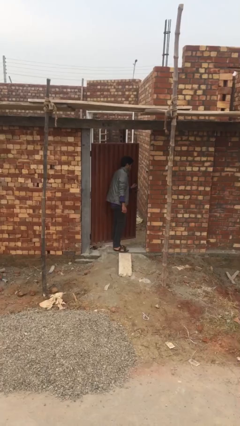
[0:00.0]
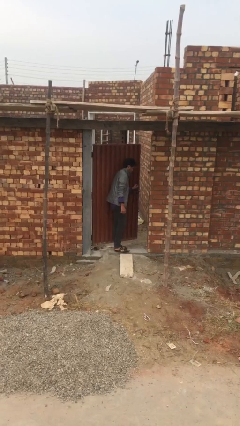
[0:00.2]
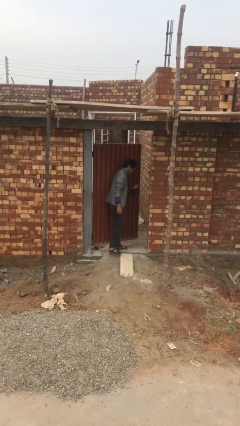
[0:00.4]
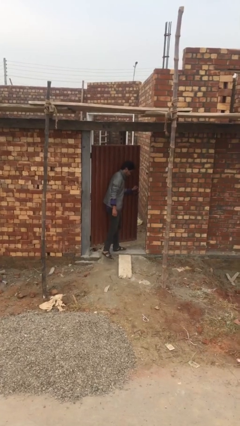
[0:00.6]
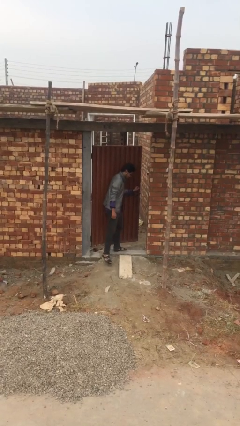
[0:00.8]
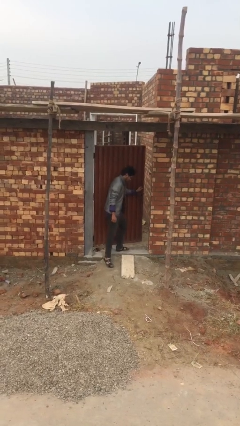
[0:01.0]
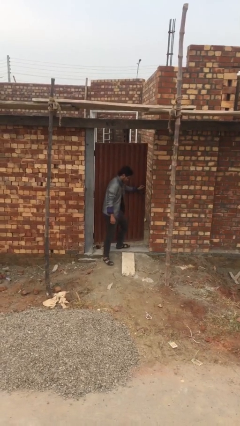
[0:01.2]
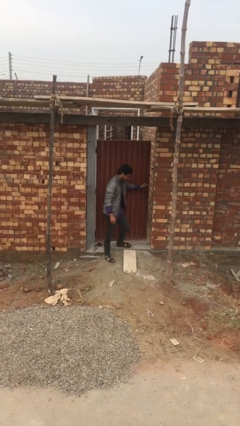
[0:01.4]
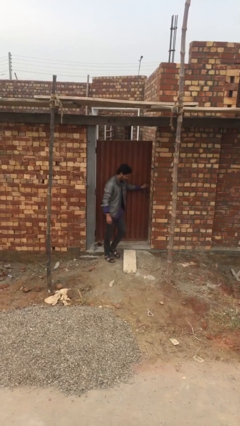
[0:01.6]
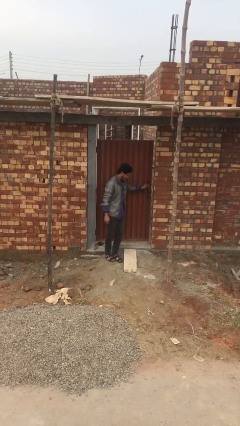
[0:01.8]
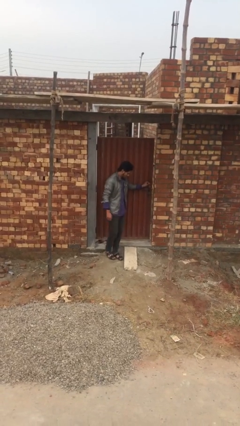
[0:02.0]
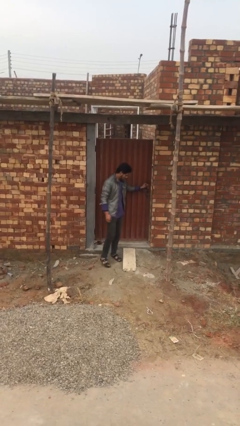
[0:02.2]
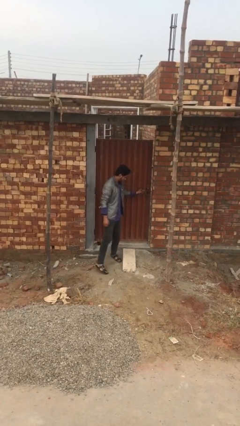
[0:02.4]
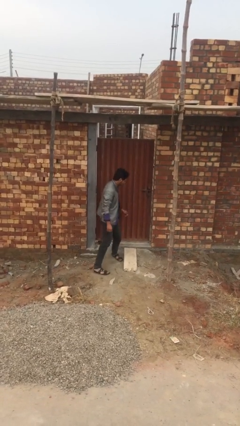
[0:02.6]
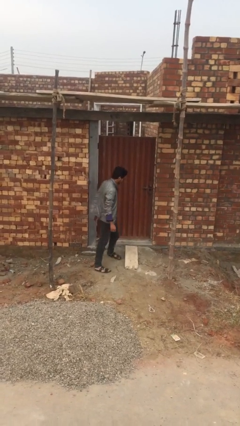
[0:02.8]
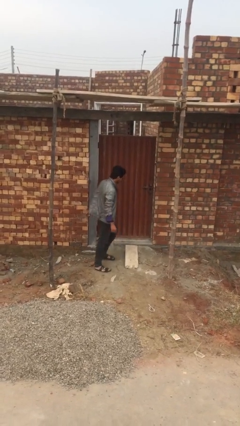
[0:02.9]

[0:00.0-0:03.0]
person closes facility door

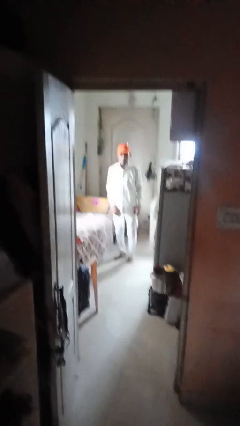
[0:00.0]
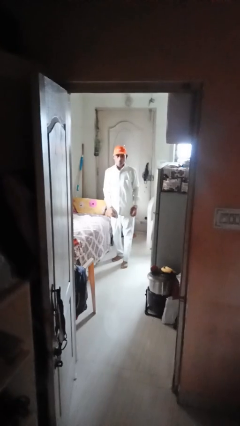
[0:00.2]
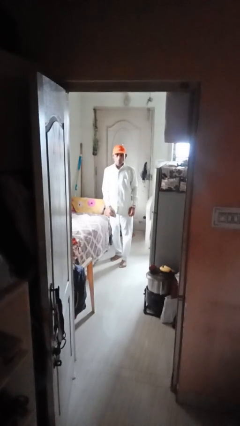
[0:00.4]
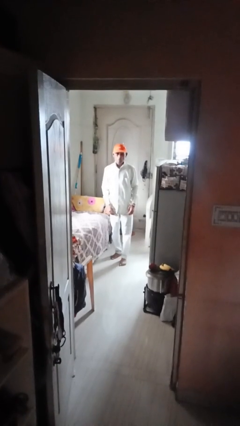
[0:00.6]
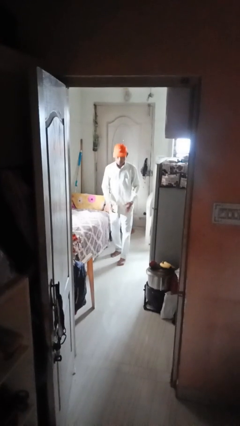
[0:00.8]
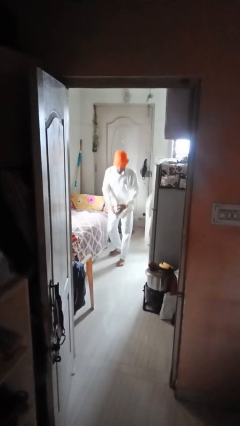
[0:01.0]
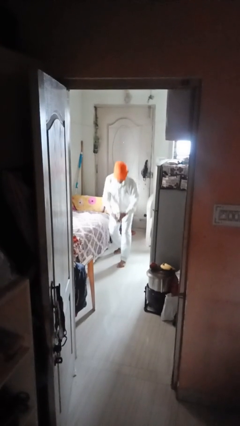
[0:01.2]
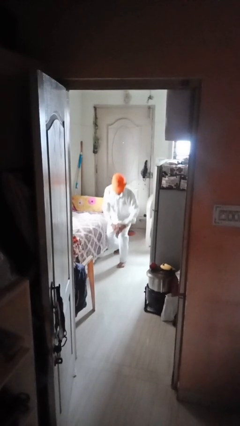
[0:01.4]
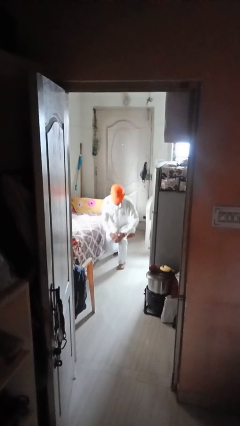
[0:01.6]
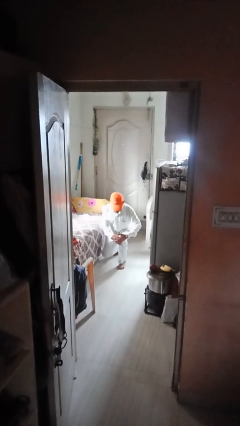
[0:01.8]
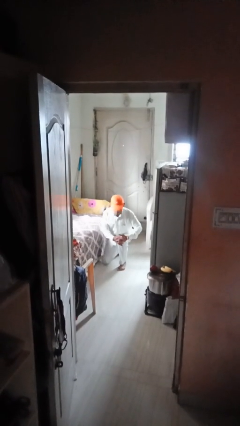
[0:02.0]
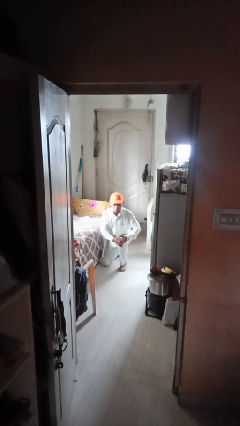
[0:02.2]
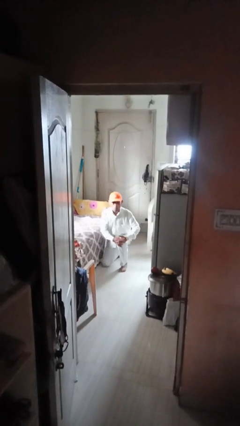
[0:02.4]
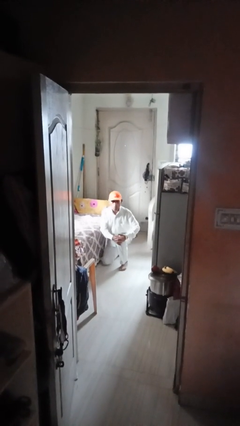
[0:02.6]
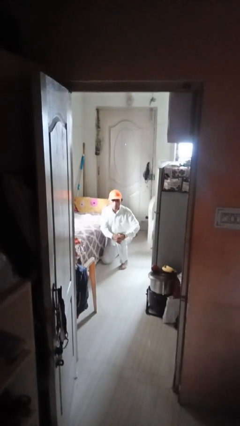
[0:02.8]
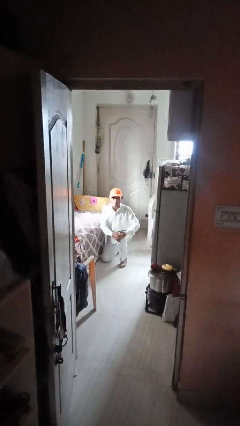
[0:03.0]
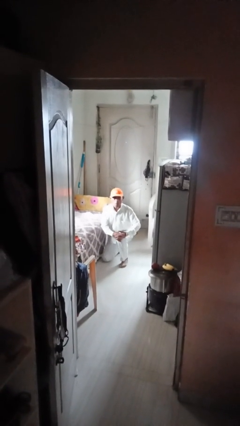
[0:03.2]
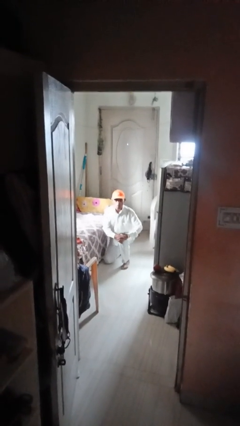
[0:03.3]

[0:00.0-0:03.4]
person exercises with lunges

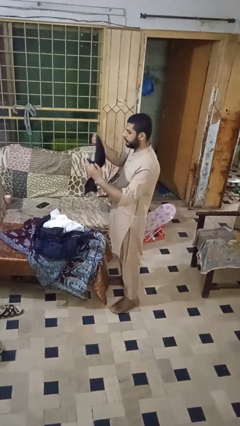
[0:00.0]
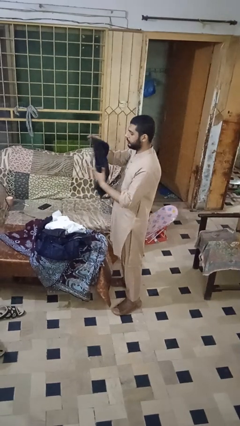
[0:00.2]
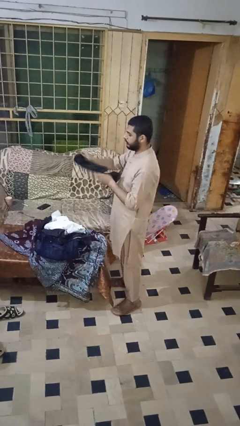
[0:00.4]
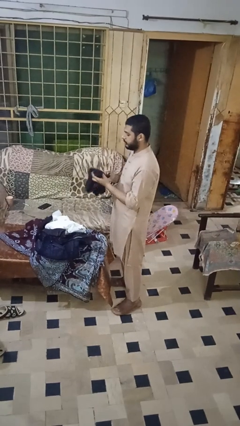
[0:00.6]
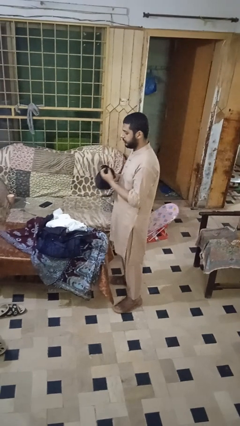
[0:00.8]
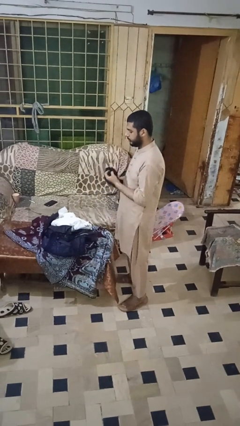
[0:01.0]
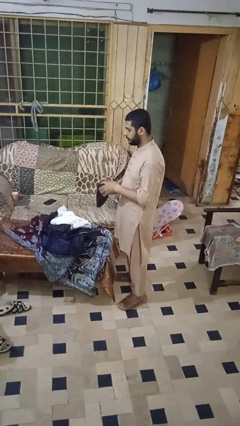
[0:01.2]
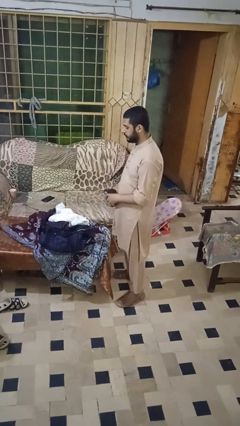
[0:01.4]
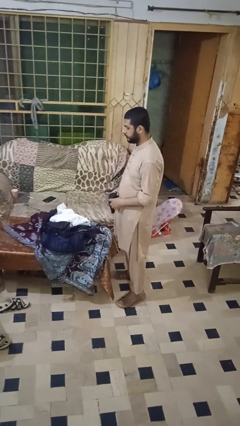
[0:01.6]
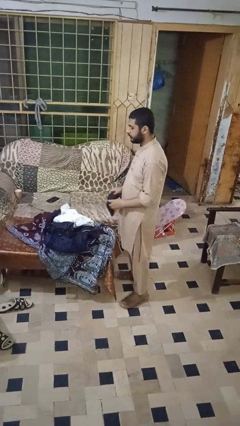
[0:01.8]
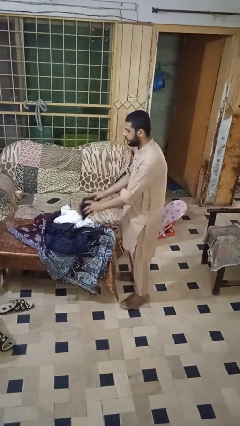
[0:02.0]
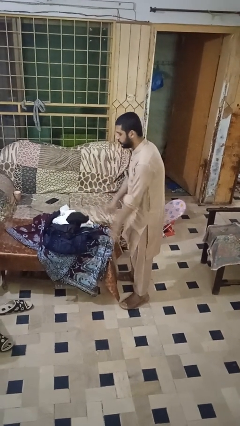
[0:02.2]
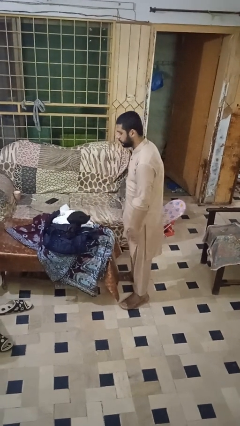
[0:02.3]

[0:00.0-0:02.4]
person folds shirt

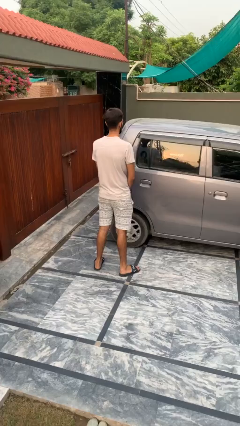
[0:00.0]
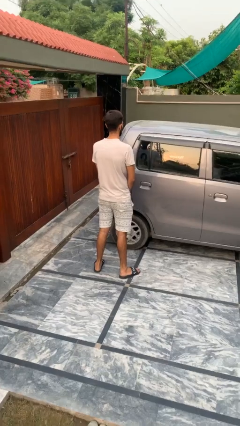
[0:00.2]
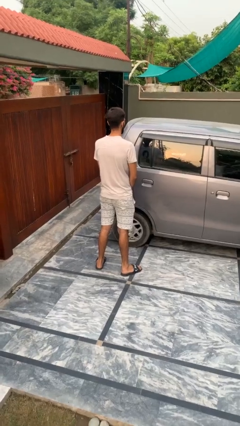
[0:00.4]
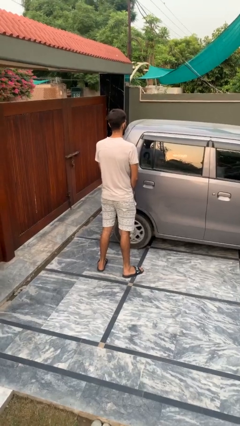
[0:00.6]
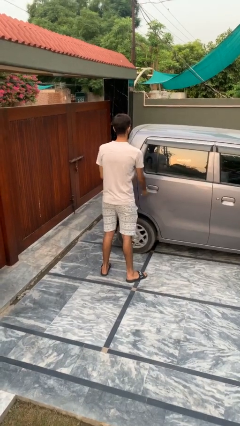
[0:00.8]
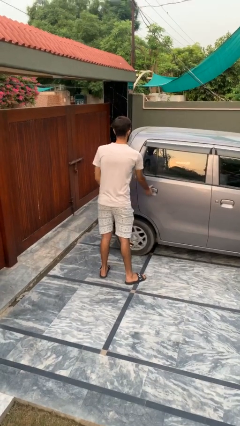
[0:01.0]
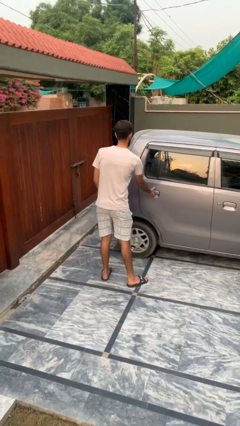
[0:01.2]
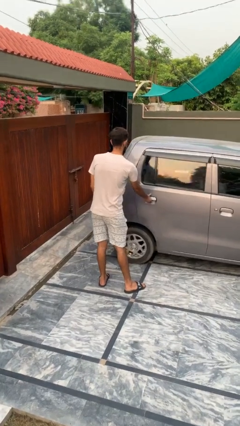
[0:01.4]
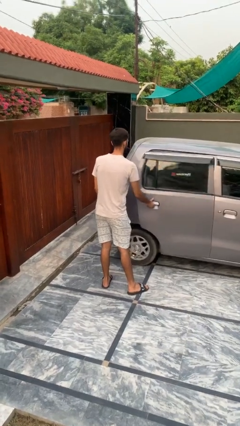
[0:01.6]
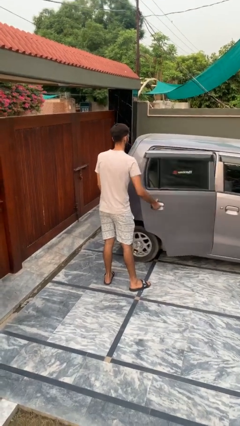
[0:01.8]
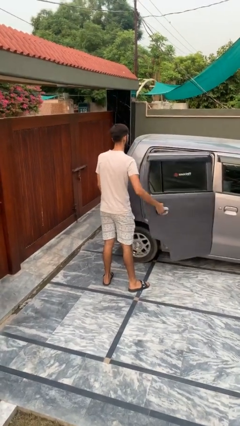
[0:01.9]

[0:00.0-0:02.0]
person opens car door

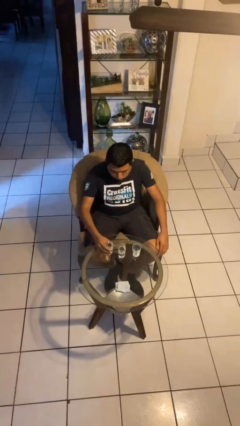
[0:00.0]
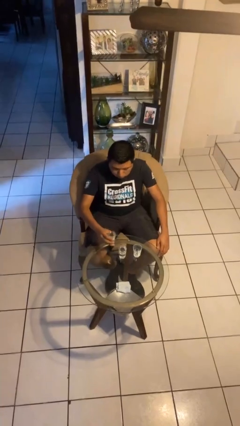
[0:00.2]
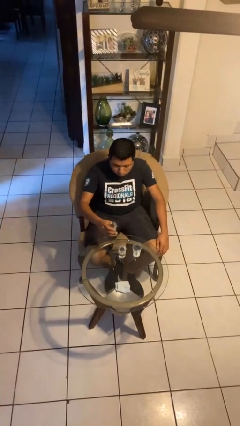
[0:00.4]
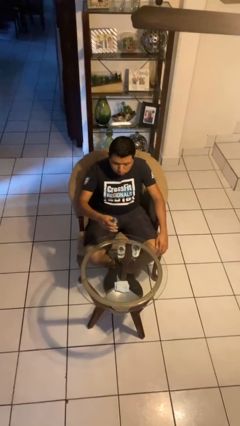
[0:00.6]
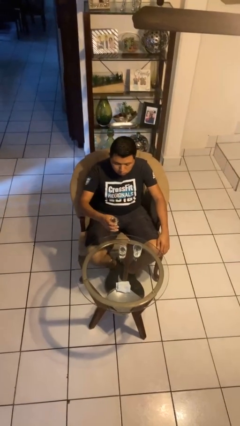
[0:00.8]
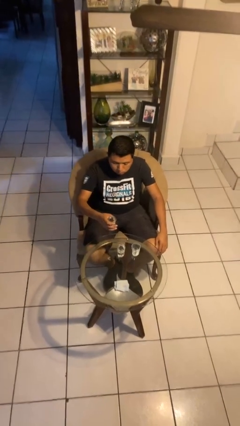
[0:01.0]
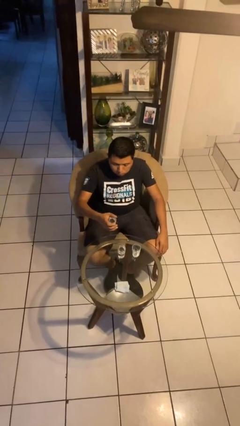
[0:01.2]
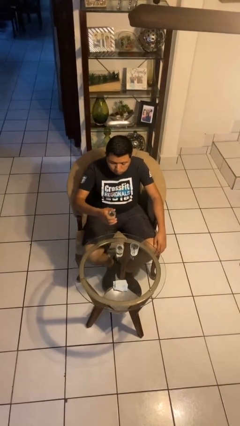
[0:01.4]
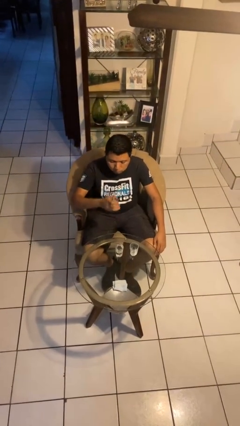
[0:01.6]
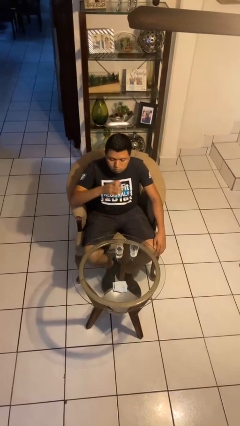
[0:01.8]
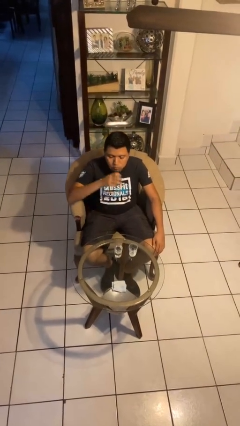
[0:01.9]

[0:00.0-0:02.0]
person picks up object from table

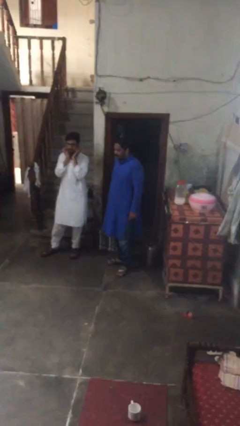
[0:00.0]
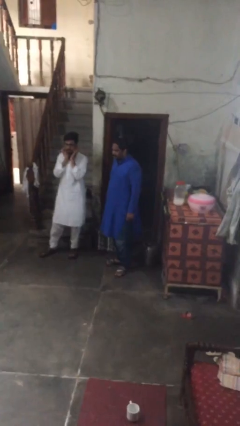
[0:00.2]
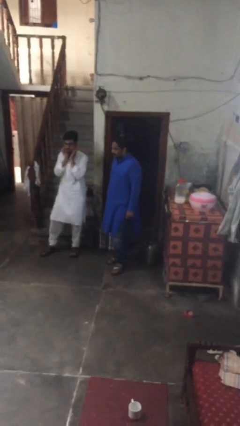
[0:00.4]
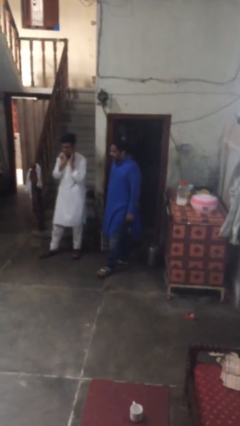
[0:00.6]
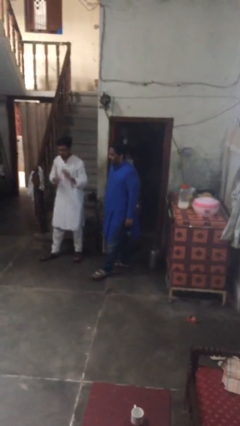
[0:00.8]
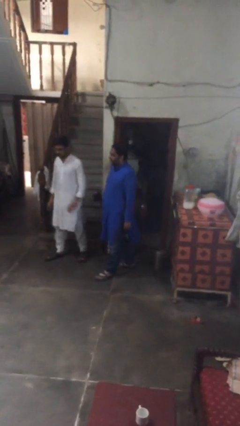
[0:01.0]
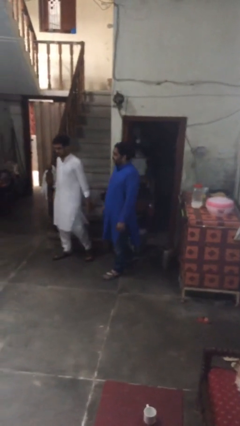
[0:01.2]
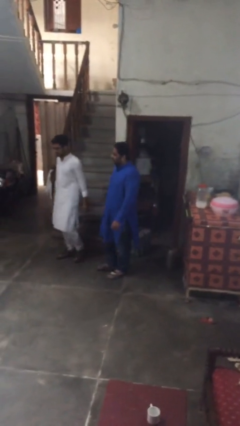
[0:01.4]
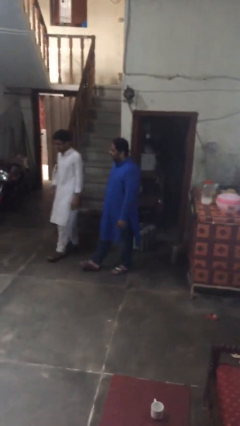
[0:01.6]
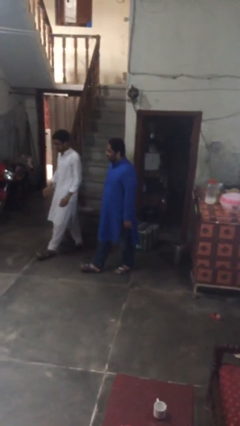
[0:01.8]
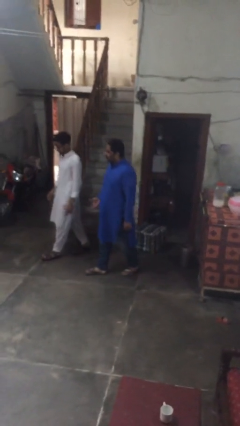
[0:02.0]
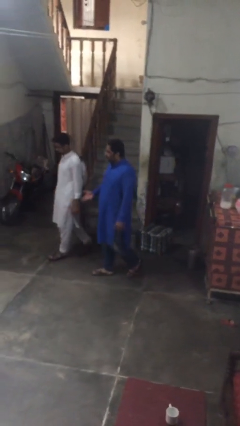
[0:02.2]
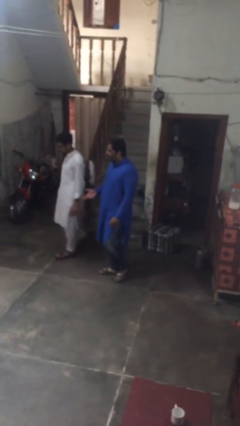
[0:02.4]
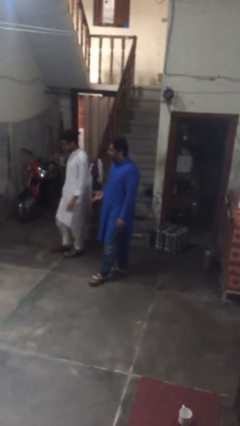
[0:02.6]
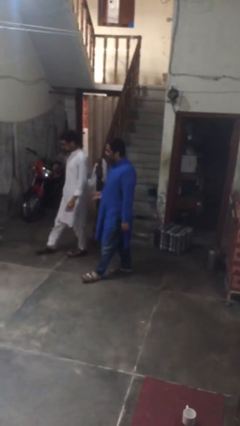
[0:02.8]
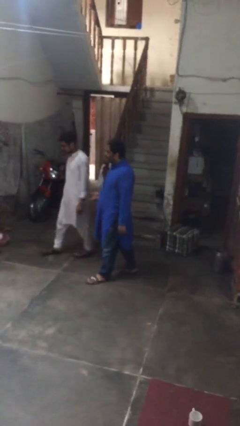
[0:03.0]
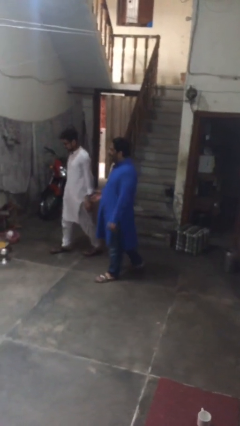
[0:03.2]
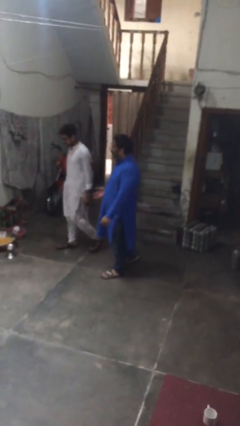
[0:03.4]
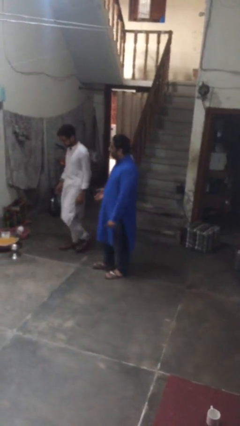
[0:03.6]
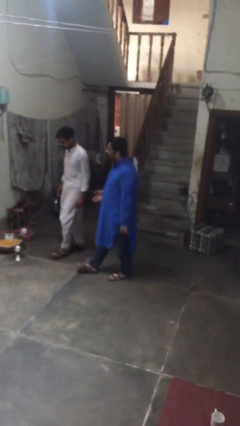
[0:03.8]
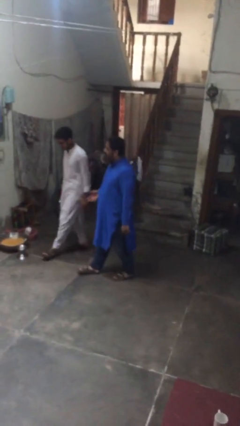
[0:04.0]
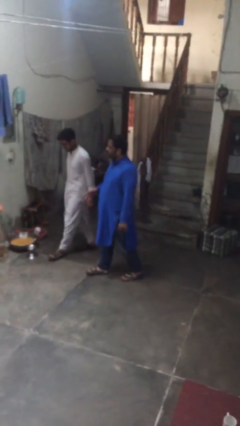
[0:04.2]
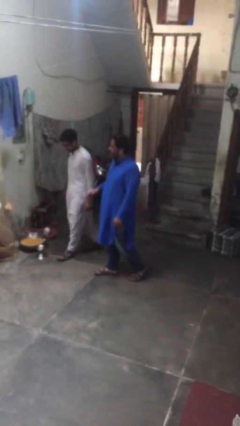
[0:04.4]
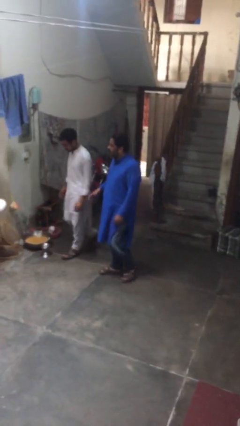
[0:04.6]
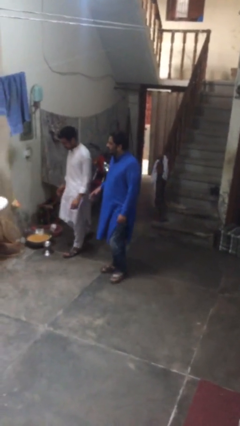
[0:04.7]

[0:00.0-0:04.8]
person talks to person
